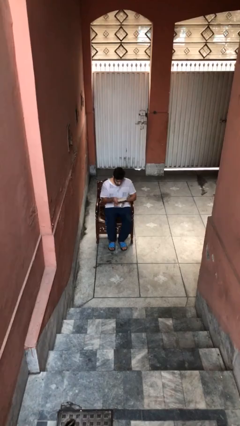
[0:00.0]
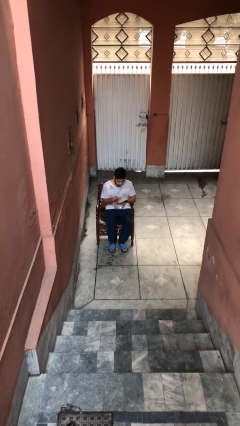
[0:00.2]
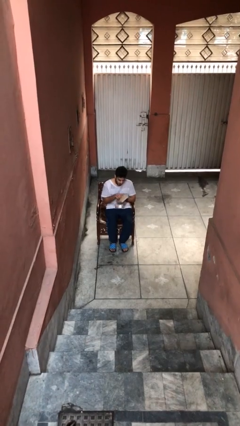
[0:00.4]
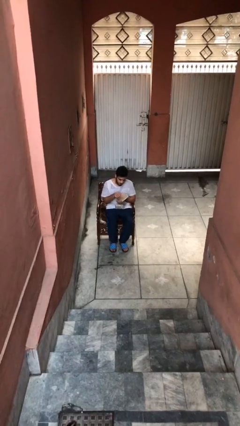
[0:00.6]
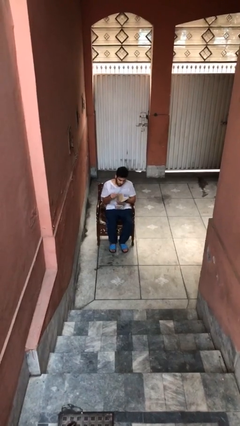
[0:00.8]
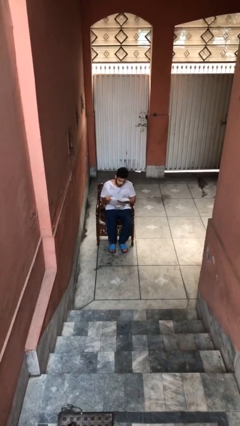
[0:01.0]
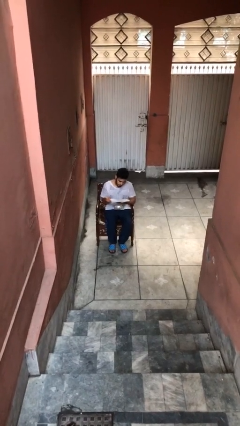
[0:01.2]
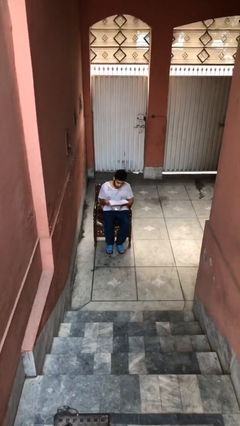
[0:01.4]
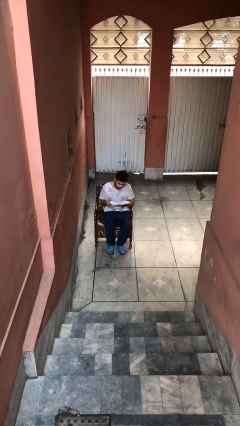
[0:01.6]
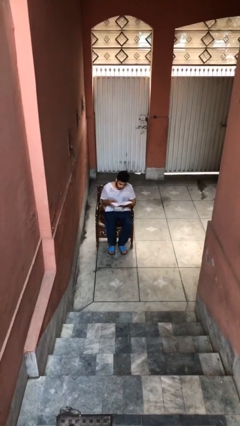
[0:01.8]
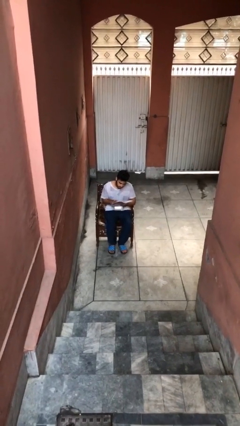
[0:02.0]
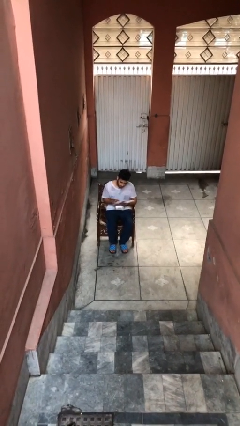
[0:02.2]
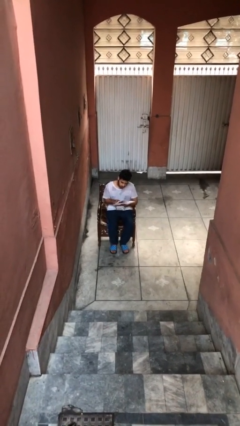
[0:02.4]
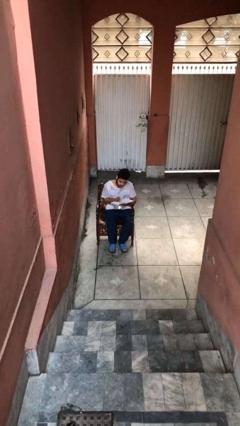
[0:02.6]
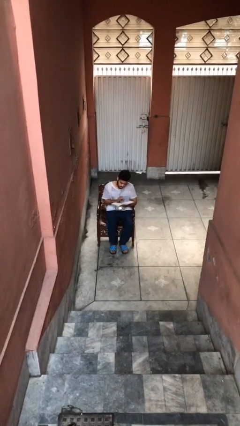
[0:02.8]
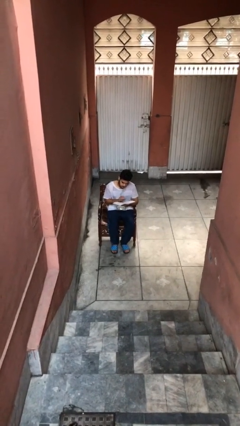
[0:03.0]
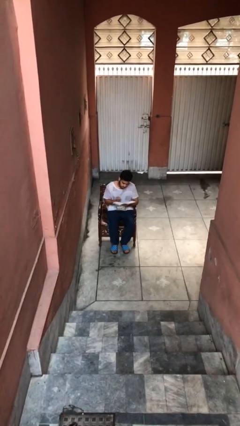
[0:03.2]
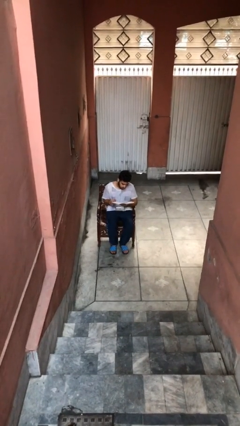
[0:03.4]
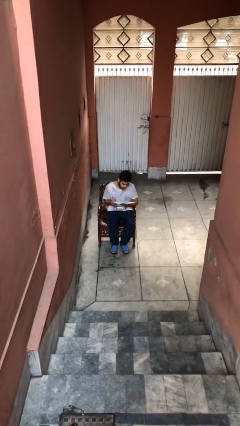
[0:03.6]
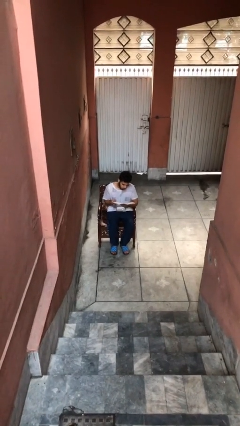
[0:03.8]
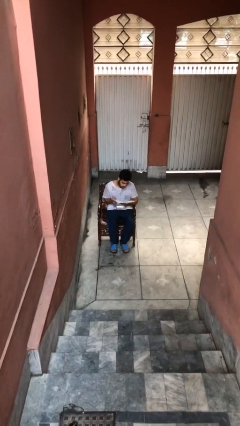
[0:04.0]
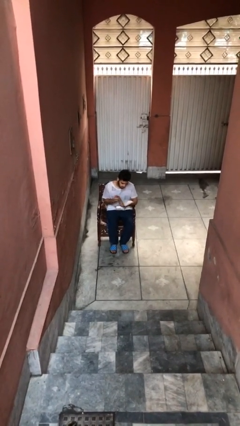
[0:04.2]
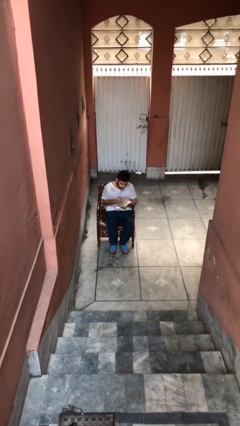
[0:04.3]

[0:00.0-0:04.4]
person reads document

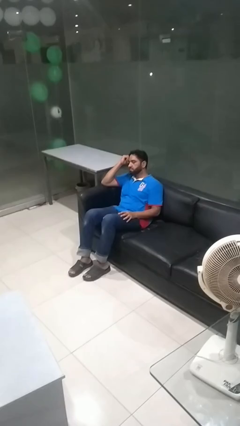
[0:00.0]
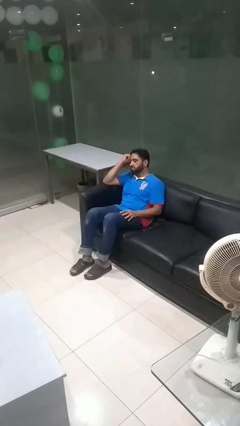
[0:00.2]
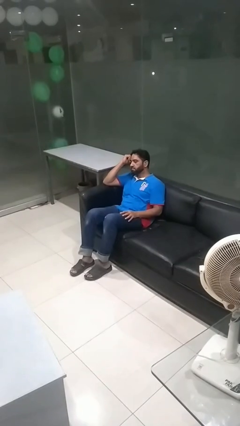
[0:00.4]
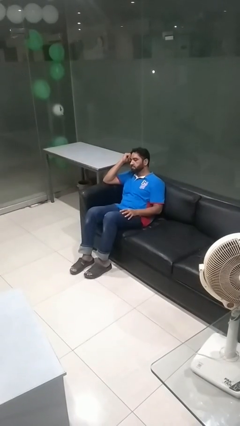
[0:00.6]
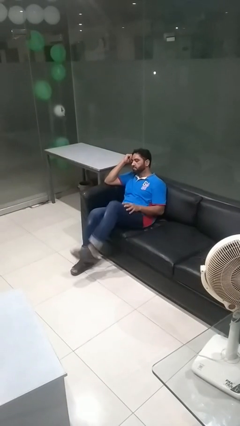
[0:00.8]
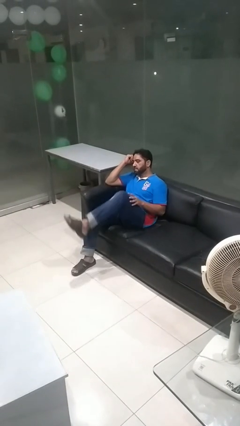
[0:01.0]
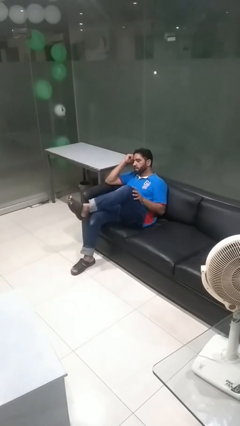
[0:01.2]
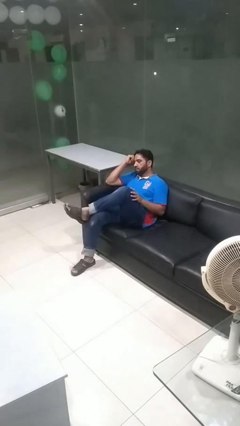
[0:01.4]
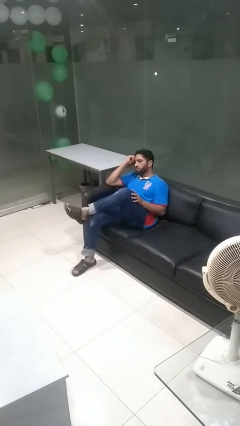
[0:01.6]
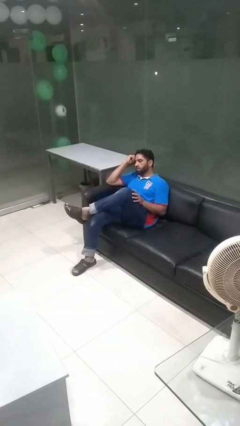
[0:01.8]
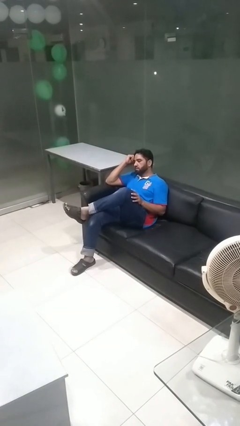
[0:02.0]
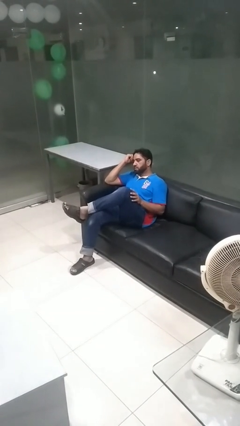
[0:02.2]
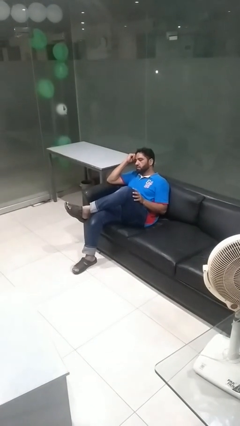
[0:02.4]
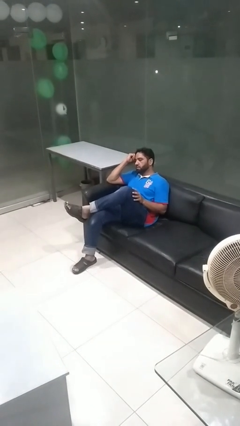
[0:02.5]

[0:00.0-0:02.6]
person crosses legs

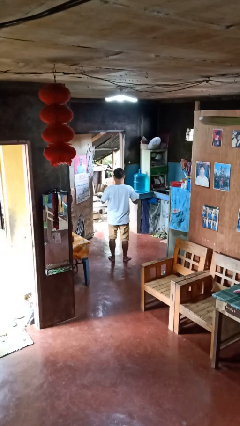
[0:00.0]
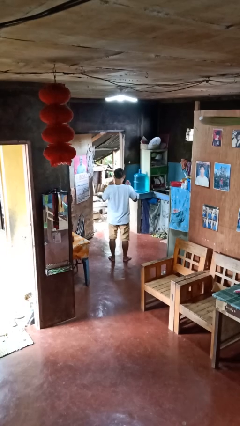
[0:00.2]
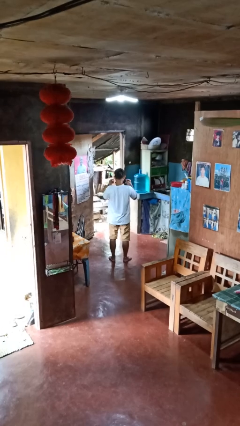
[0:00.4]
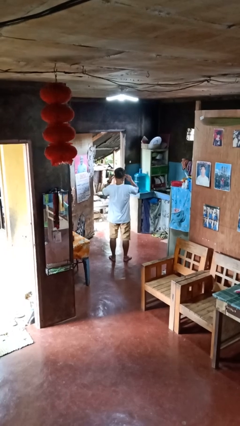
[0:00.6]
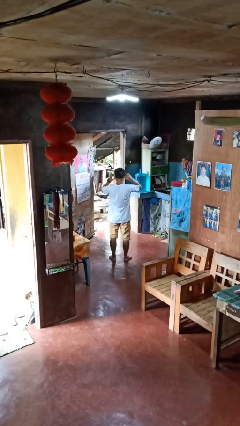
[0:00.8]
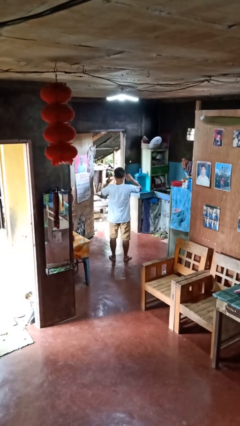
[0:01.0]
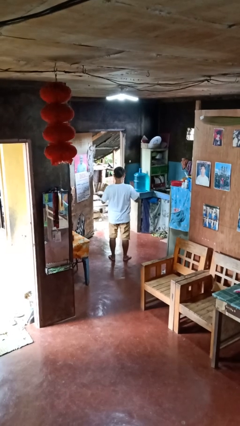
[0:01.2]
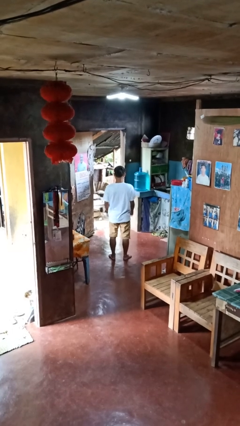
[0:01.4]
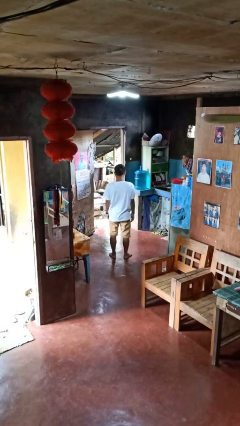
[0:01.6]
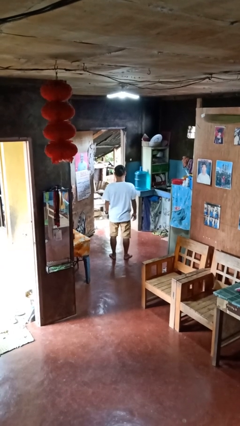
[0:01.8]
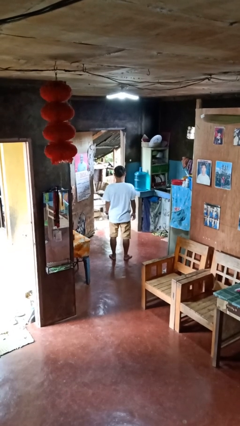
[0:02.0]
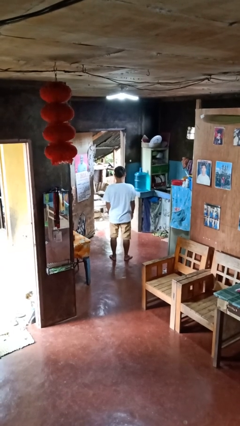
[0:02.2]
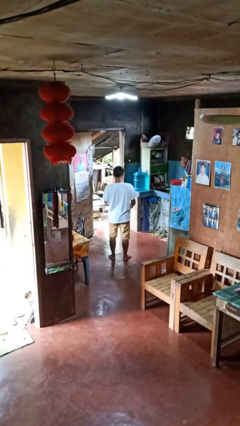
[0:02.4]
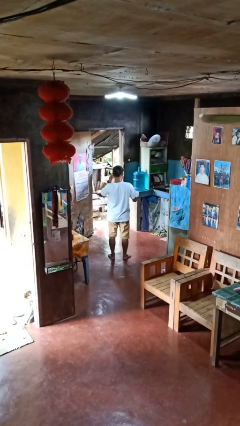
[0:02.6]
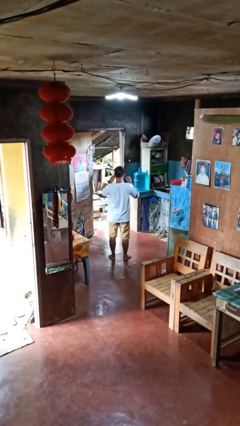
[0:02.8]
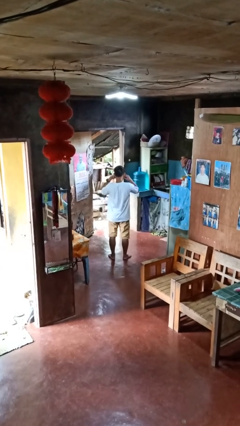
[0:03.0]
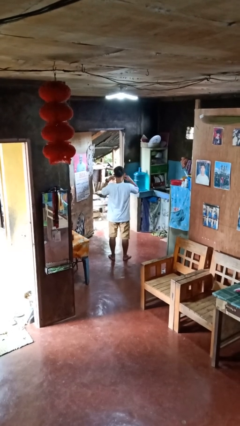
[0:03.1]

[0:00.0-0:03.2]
person puts on facemask

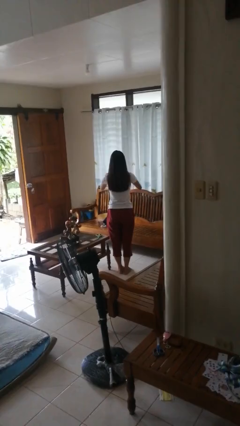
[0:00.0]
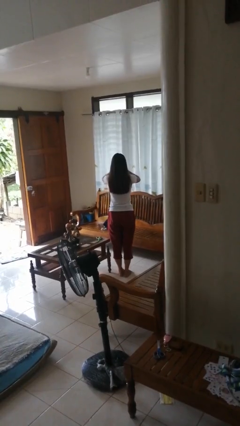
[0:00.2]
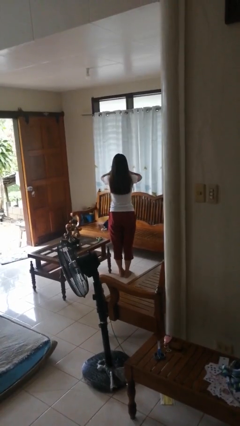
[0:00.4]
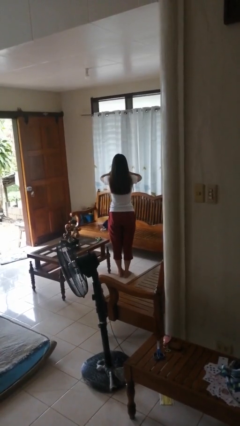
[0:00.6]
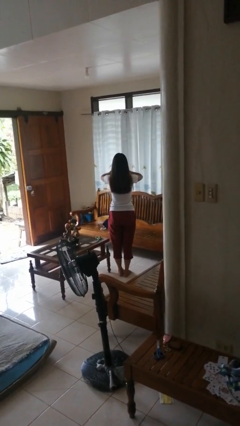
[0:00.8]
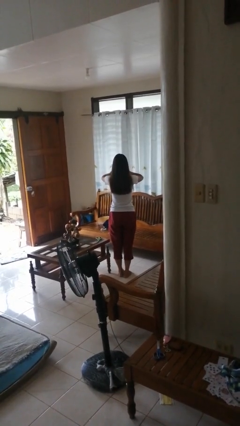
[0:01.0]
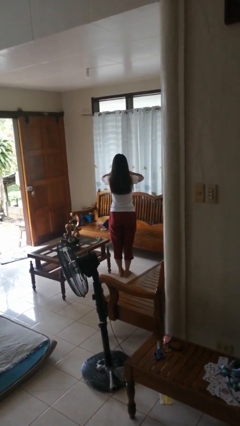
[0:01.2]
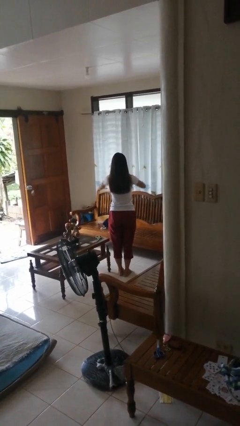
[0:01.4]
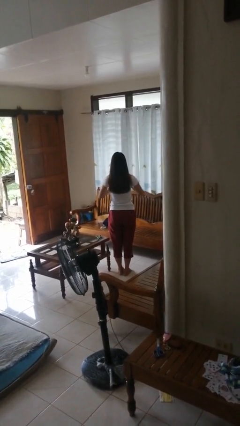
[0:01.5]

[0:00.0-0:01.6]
person covers face with hands

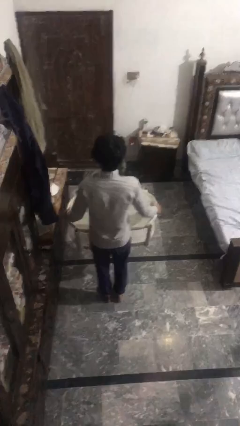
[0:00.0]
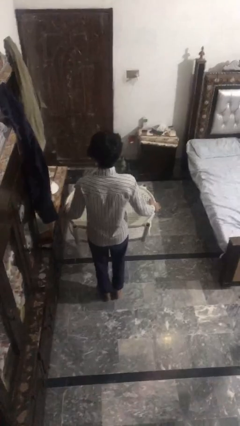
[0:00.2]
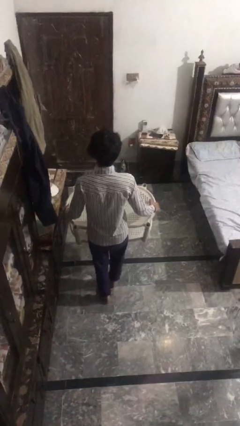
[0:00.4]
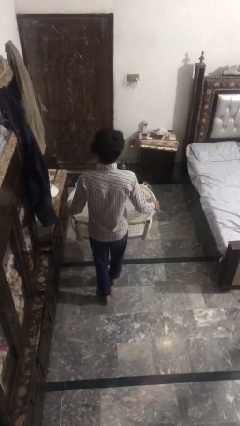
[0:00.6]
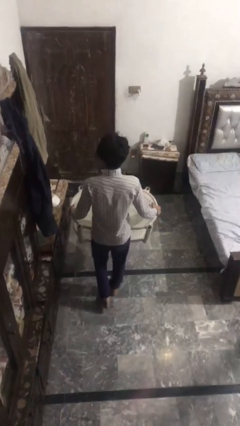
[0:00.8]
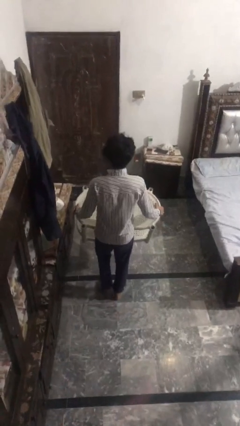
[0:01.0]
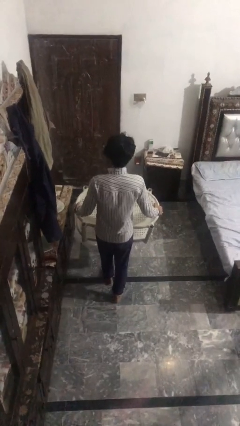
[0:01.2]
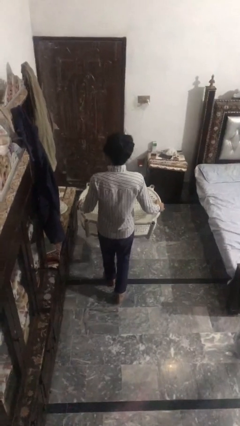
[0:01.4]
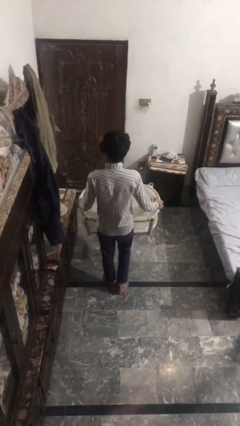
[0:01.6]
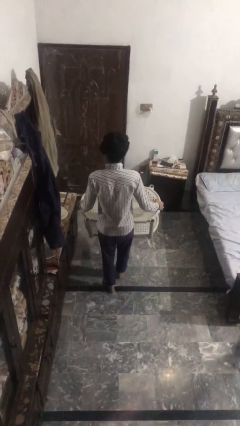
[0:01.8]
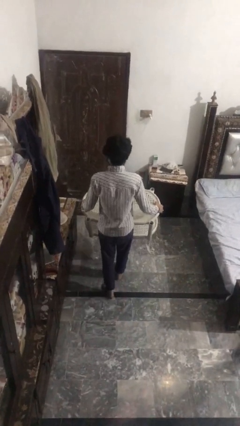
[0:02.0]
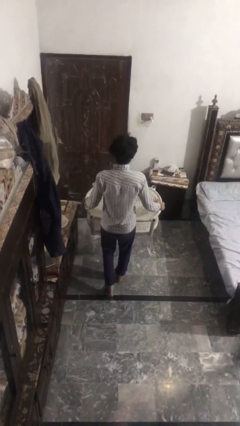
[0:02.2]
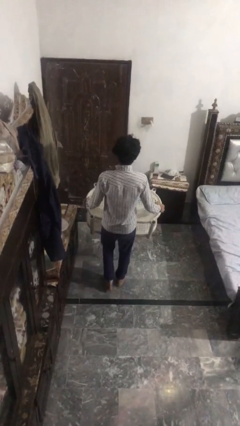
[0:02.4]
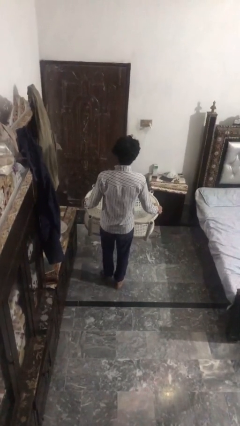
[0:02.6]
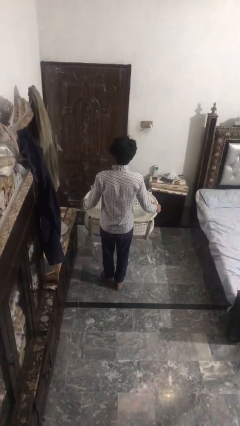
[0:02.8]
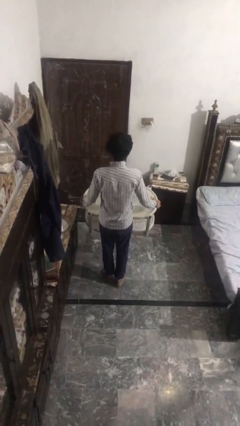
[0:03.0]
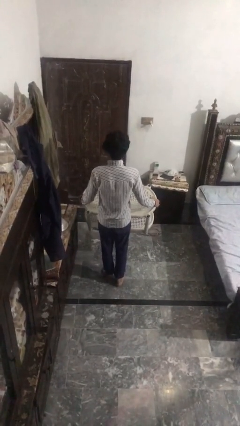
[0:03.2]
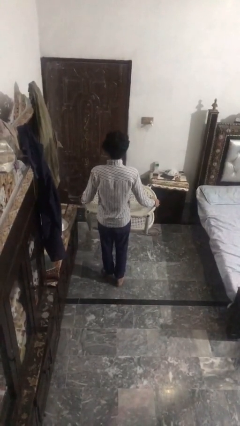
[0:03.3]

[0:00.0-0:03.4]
person carries furniture

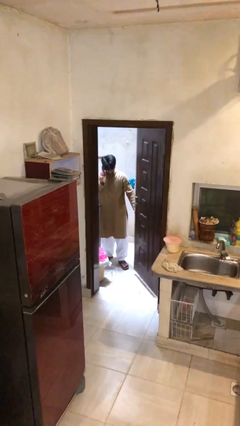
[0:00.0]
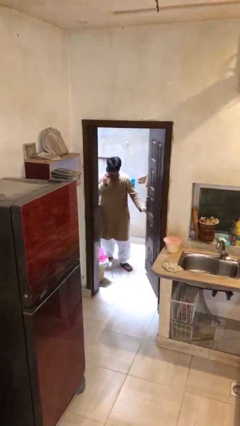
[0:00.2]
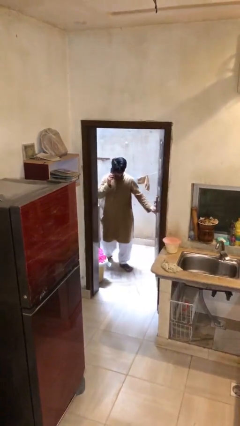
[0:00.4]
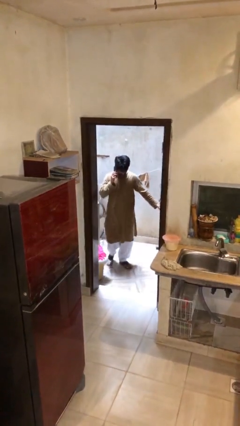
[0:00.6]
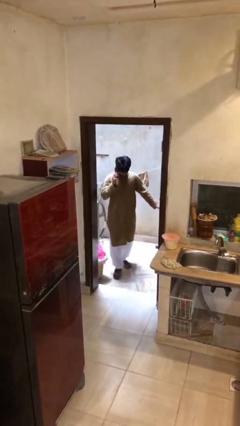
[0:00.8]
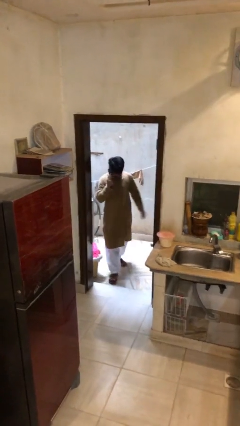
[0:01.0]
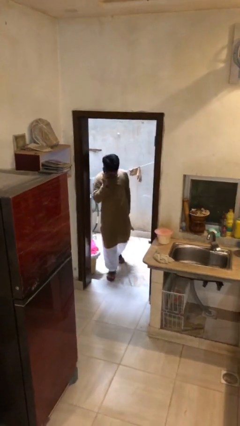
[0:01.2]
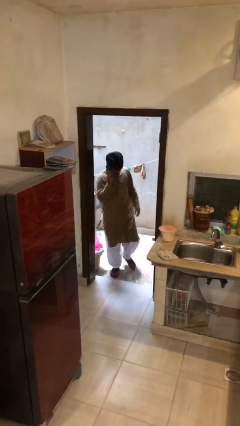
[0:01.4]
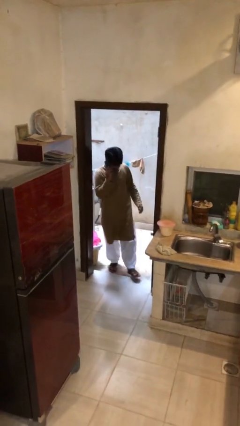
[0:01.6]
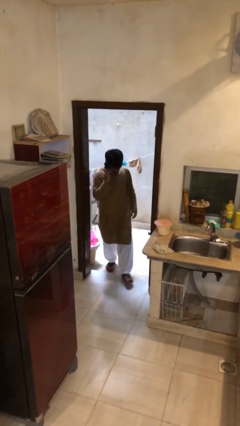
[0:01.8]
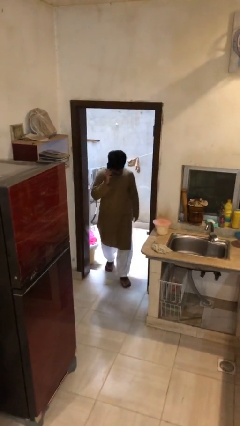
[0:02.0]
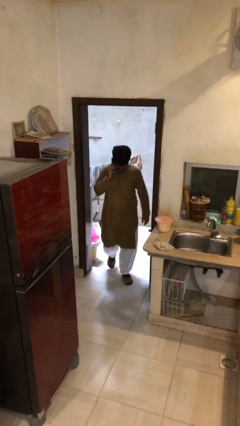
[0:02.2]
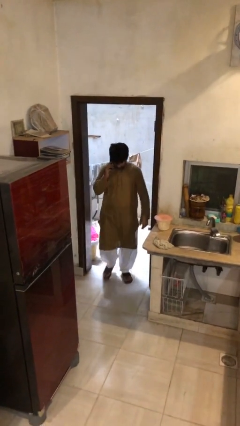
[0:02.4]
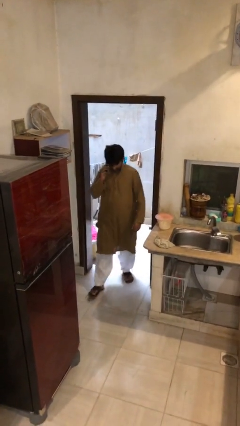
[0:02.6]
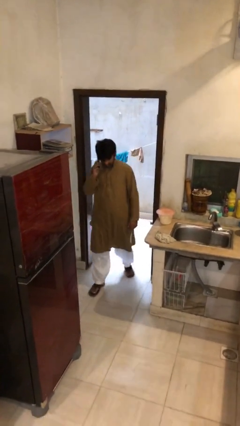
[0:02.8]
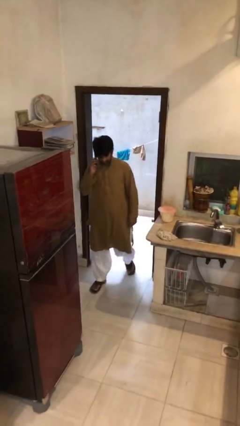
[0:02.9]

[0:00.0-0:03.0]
person enters scene through structure
